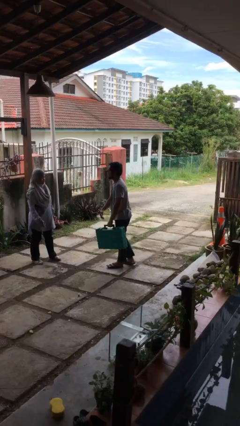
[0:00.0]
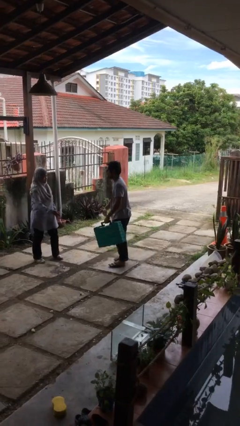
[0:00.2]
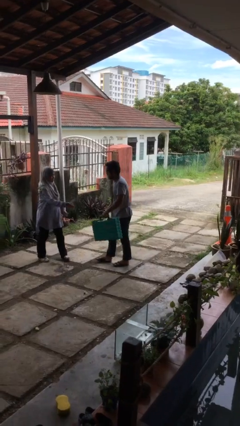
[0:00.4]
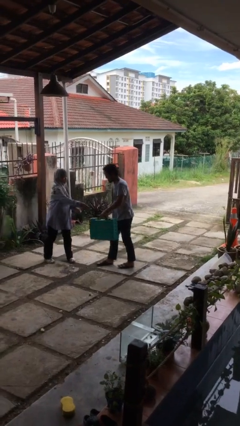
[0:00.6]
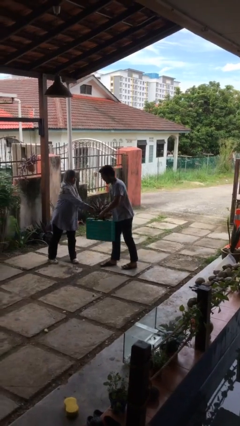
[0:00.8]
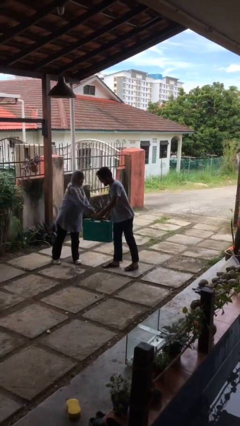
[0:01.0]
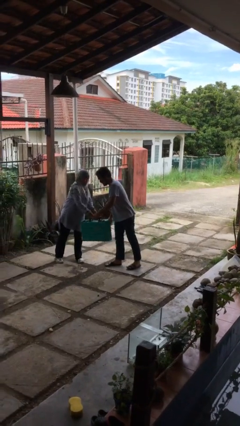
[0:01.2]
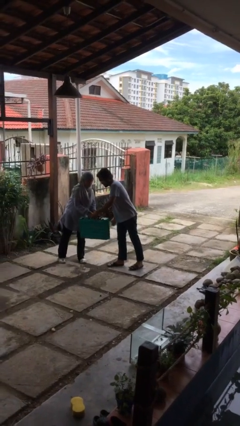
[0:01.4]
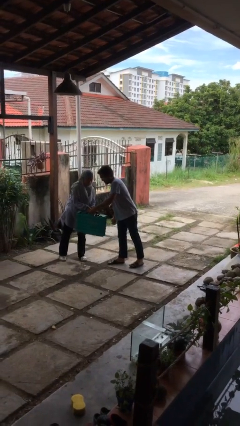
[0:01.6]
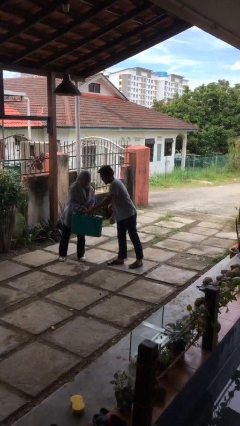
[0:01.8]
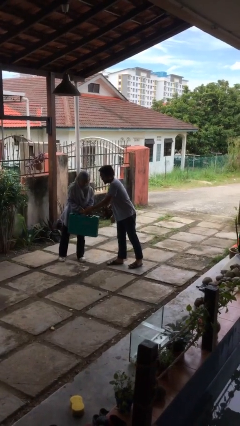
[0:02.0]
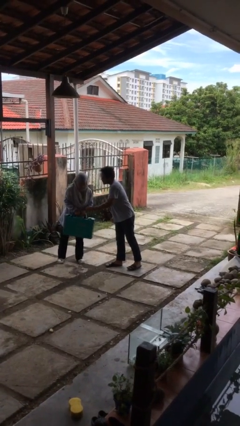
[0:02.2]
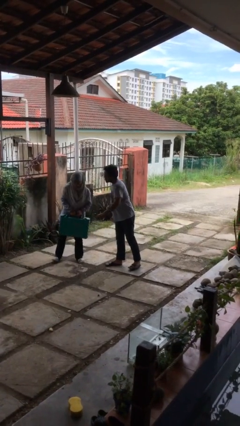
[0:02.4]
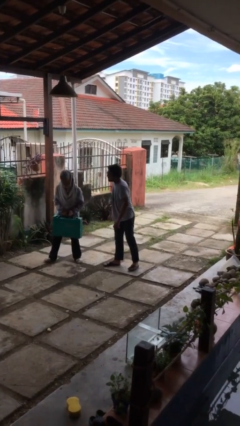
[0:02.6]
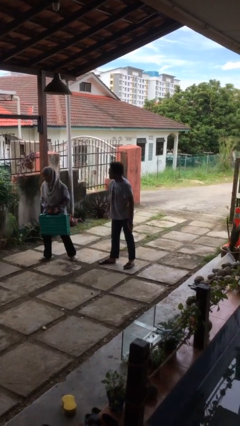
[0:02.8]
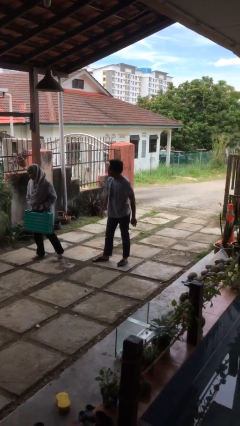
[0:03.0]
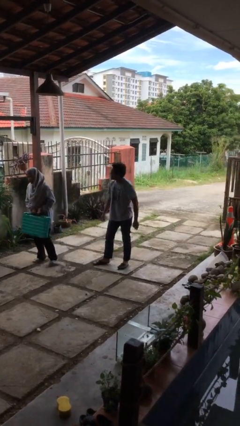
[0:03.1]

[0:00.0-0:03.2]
person transfers object to person

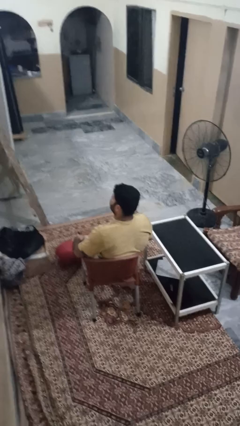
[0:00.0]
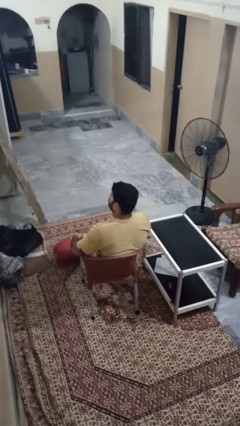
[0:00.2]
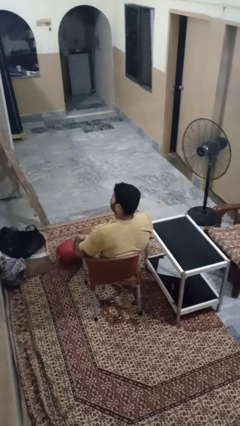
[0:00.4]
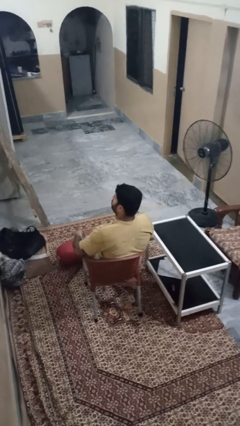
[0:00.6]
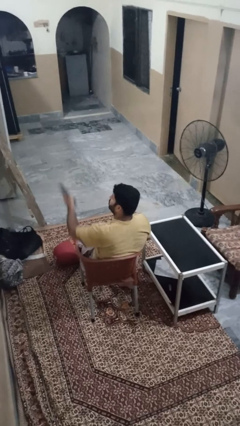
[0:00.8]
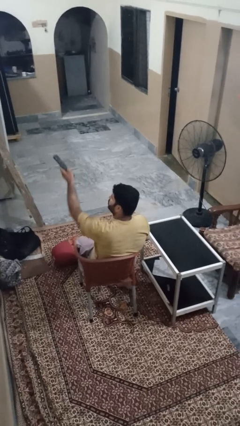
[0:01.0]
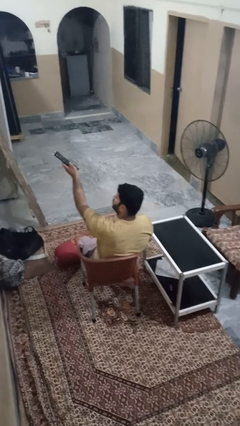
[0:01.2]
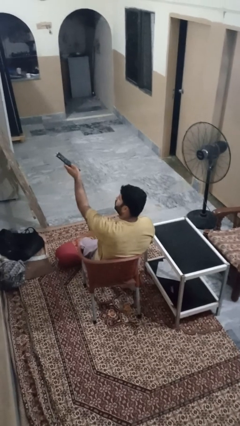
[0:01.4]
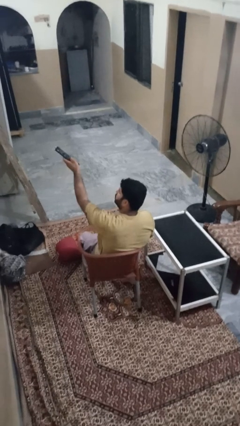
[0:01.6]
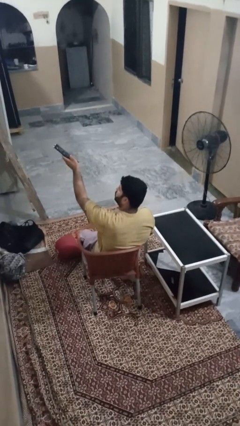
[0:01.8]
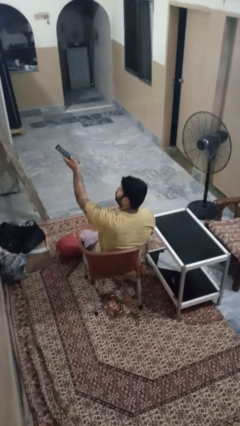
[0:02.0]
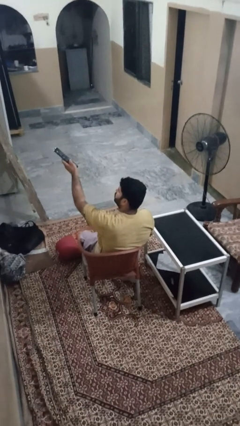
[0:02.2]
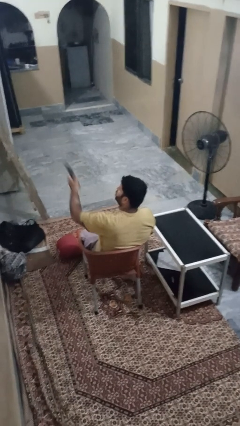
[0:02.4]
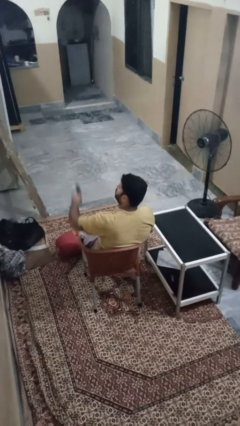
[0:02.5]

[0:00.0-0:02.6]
person uses television remote

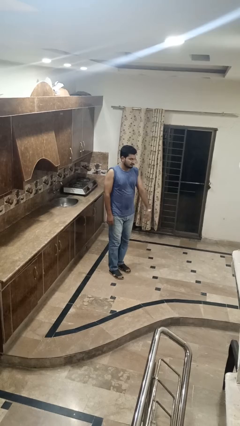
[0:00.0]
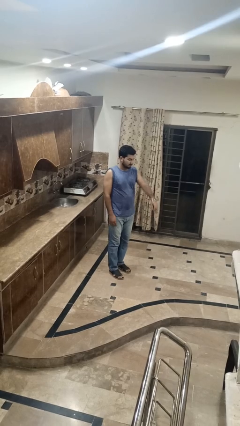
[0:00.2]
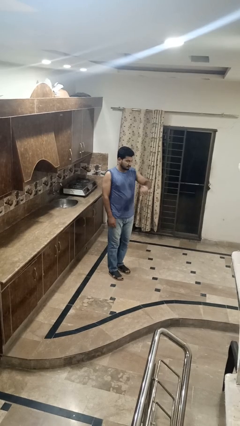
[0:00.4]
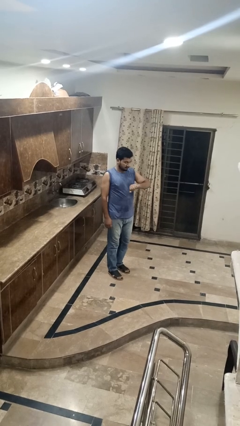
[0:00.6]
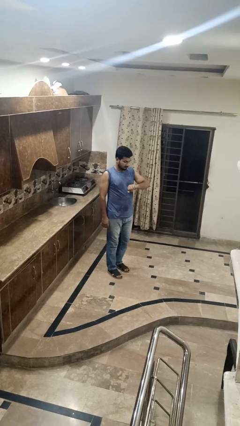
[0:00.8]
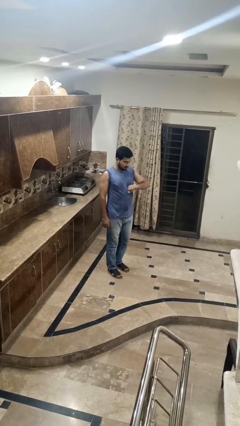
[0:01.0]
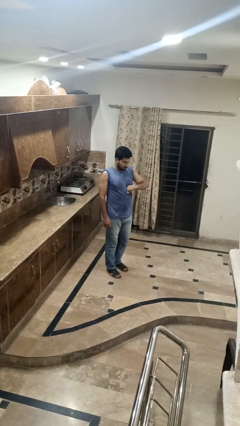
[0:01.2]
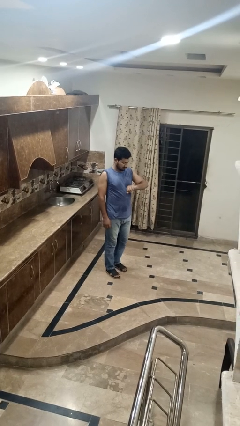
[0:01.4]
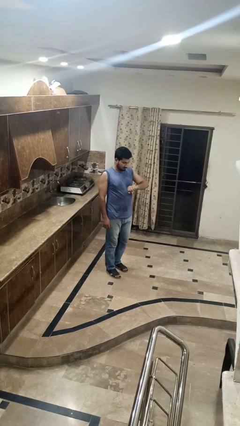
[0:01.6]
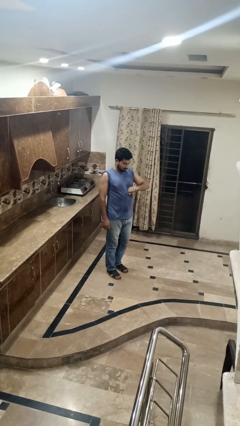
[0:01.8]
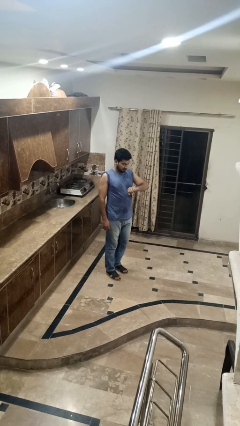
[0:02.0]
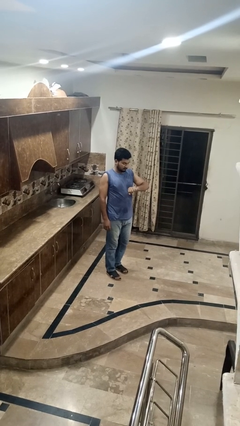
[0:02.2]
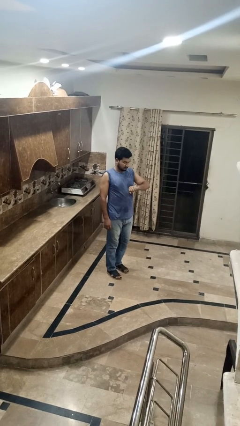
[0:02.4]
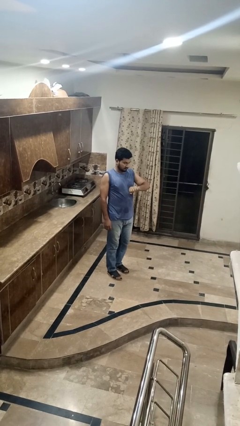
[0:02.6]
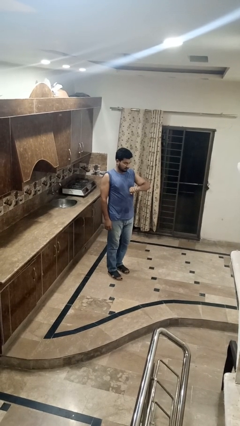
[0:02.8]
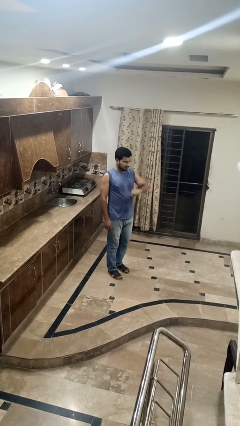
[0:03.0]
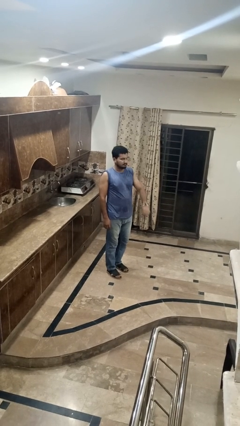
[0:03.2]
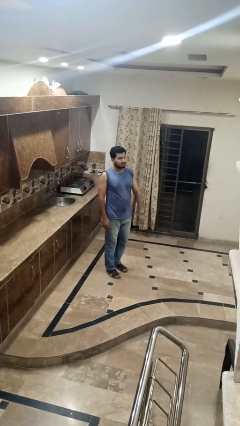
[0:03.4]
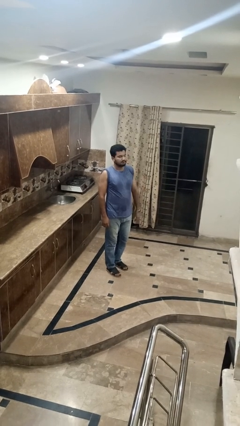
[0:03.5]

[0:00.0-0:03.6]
person looks at wristwatch

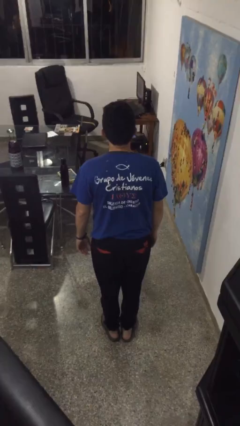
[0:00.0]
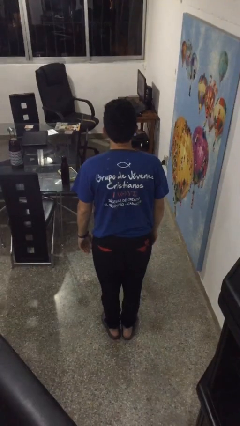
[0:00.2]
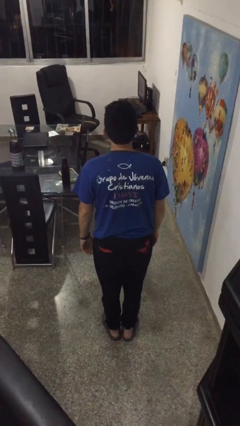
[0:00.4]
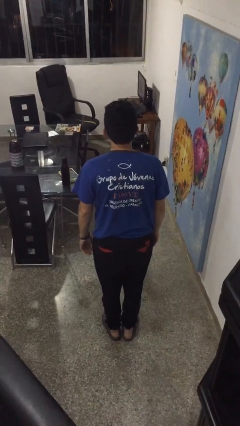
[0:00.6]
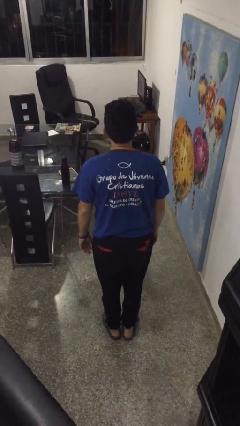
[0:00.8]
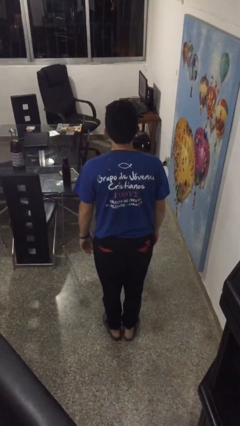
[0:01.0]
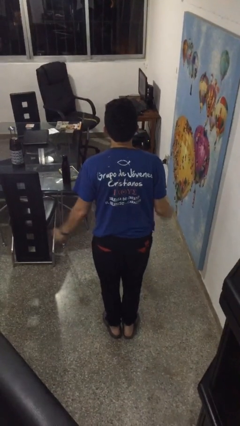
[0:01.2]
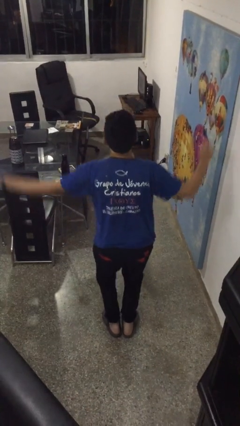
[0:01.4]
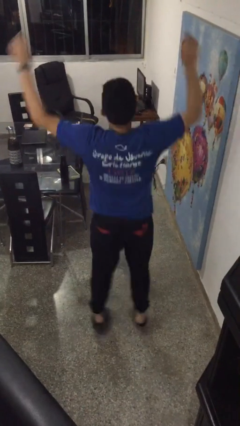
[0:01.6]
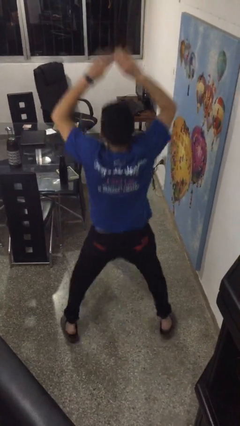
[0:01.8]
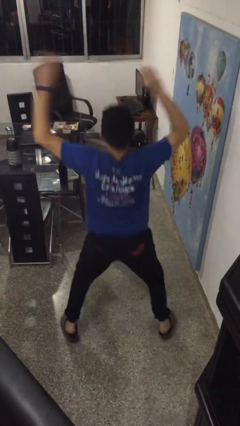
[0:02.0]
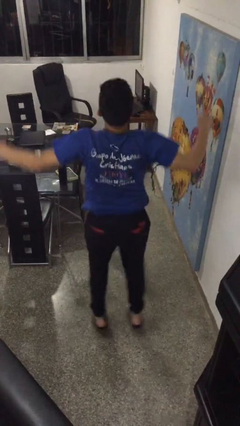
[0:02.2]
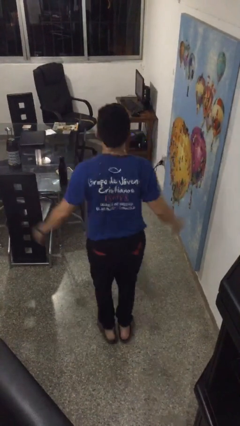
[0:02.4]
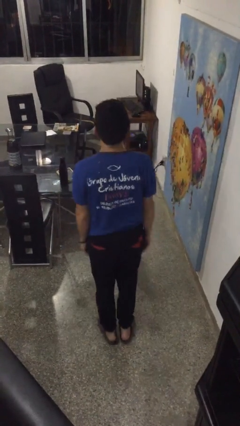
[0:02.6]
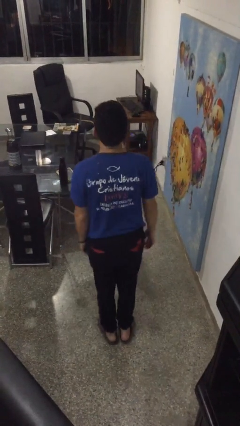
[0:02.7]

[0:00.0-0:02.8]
person exercises with jumping jacks

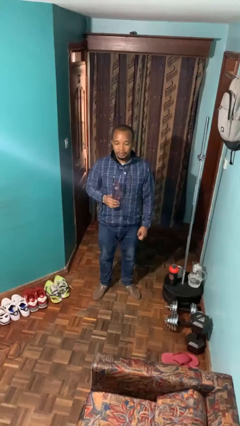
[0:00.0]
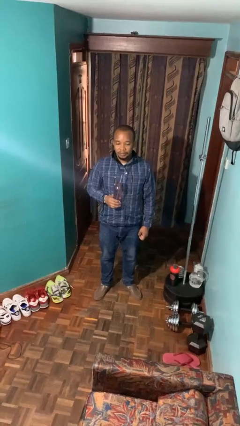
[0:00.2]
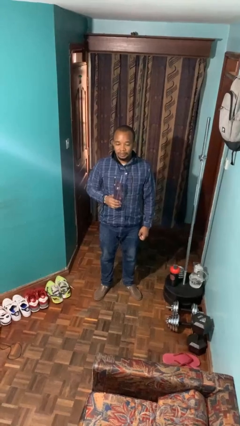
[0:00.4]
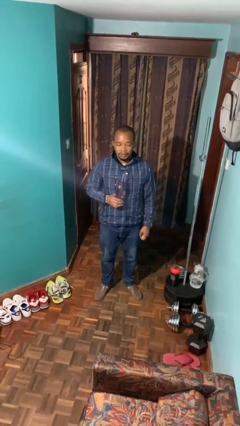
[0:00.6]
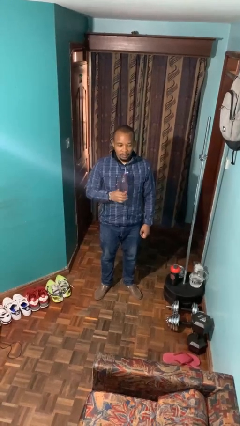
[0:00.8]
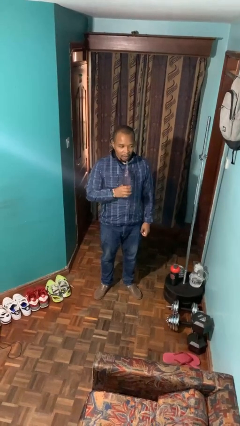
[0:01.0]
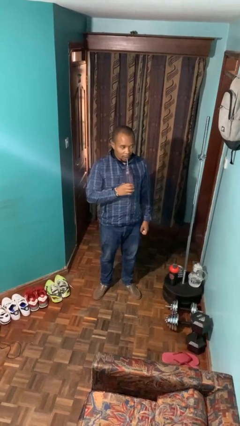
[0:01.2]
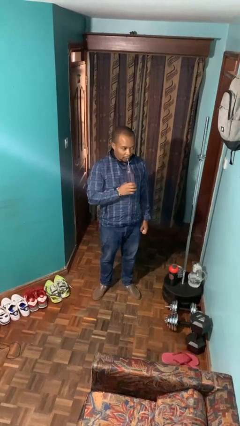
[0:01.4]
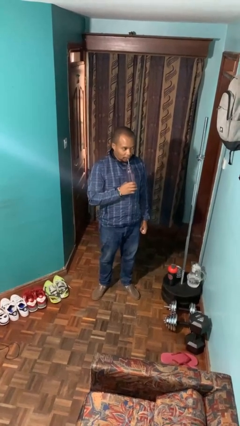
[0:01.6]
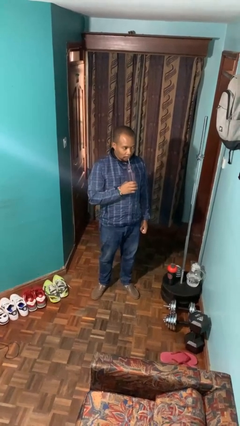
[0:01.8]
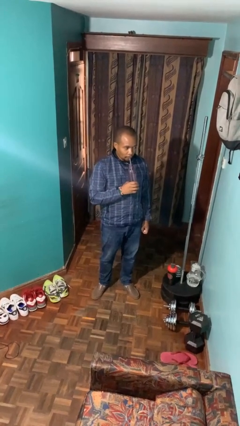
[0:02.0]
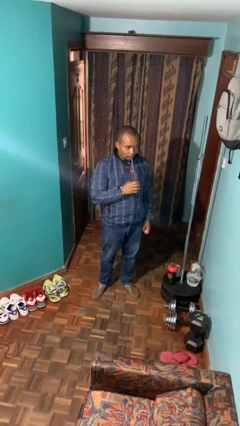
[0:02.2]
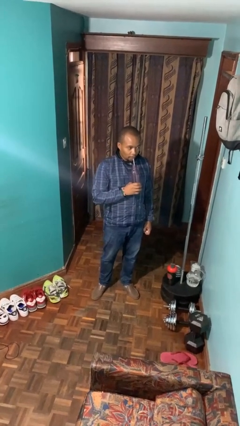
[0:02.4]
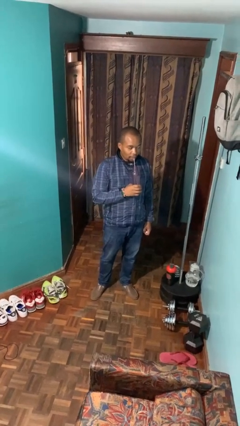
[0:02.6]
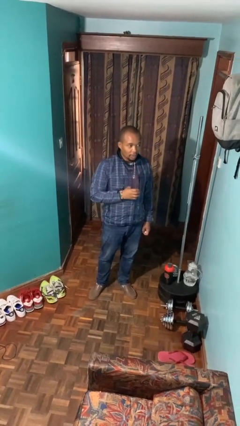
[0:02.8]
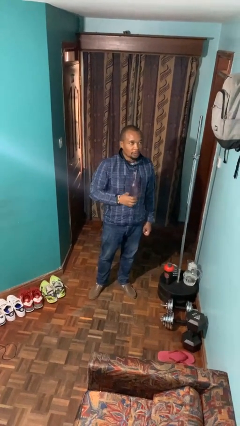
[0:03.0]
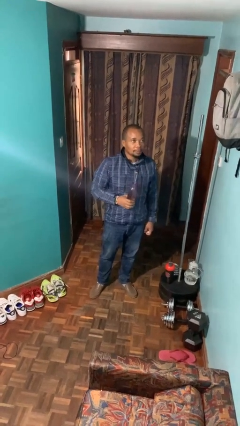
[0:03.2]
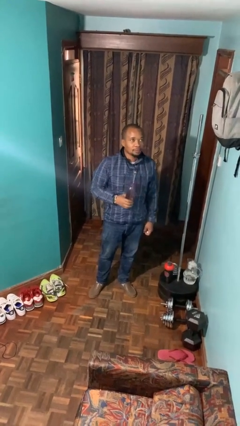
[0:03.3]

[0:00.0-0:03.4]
person drinks from straw

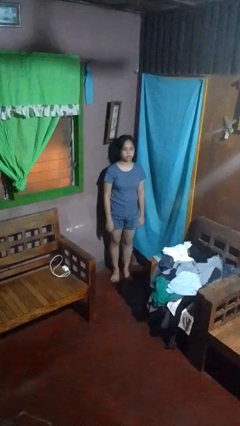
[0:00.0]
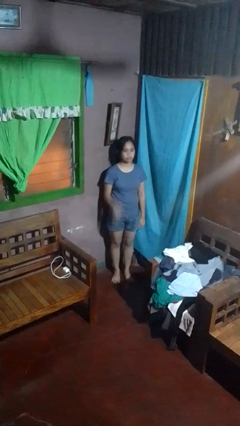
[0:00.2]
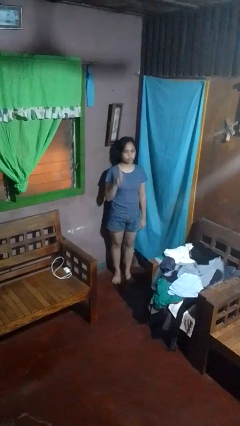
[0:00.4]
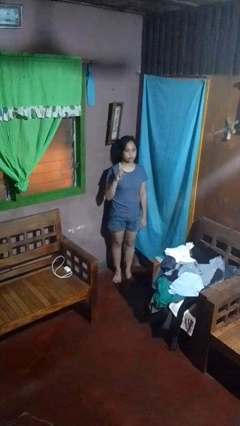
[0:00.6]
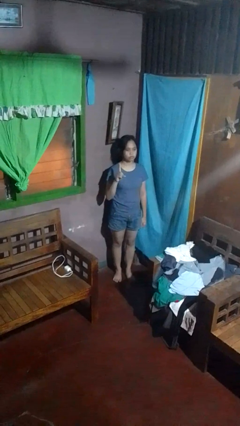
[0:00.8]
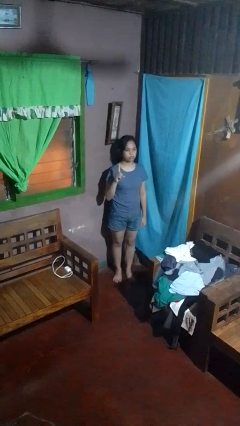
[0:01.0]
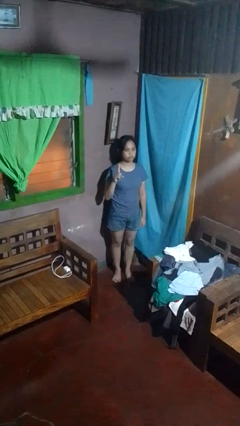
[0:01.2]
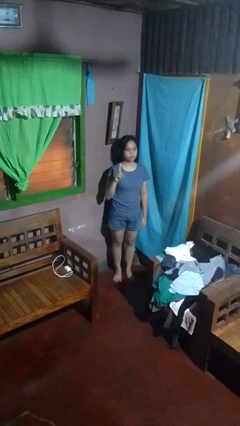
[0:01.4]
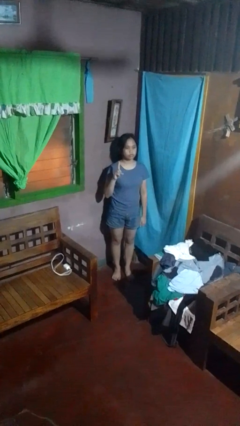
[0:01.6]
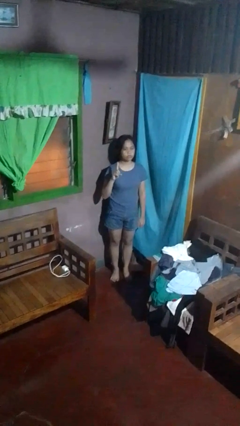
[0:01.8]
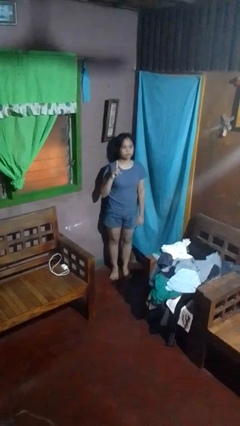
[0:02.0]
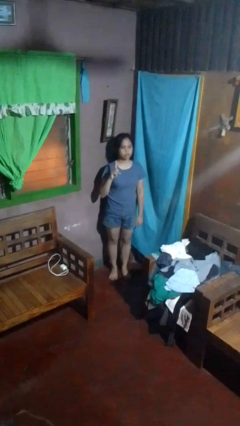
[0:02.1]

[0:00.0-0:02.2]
person gestures number one
